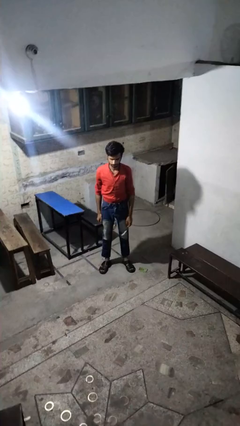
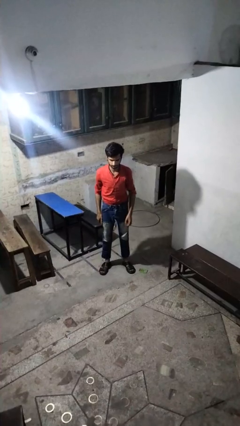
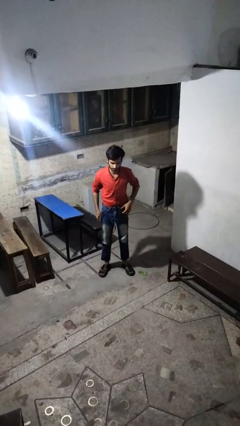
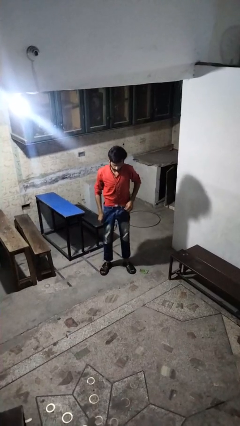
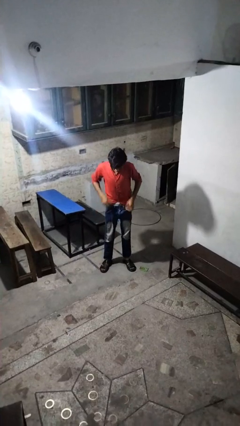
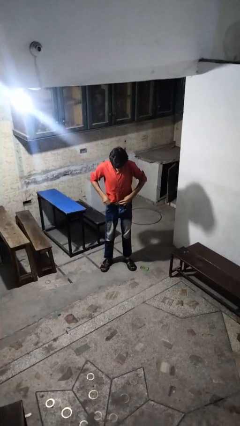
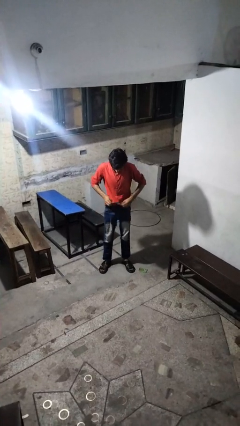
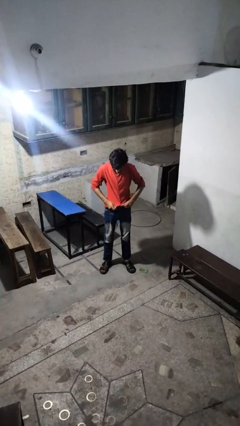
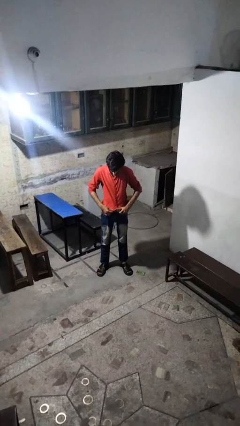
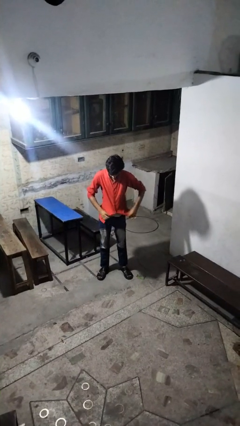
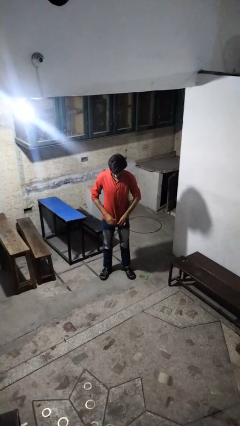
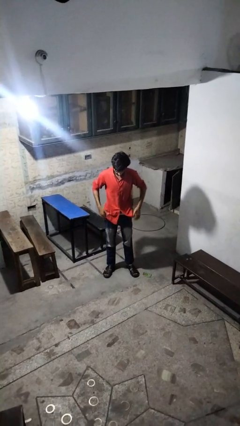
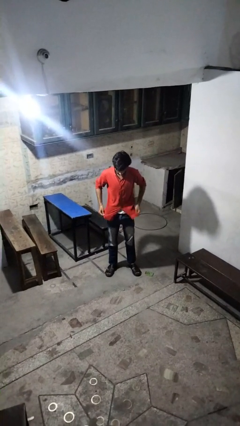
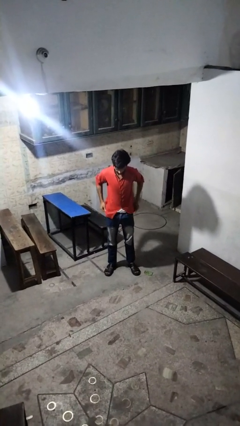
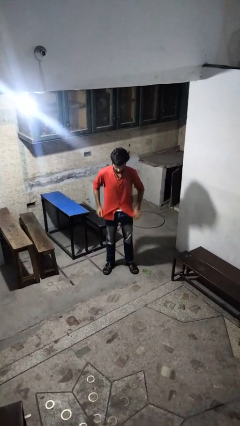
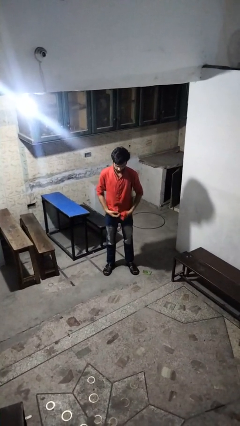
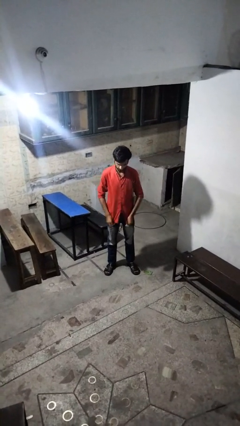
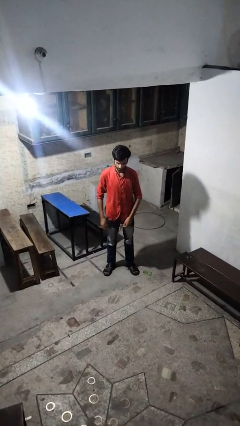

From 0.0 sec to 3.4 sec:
person untucks shirt

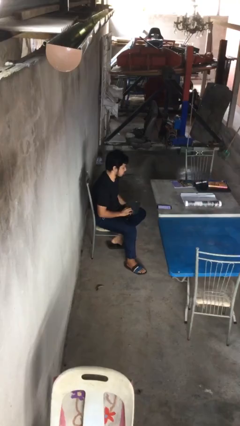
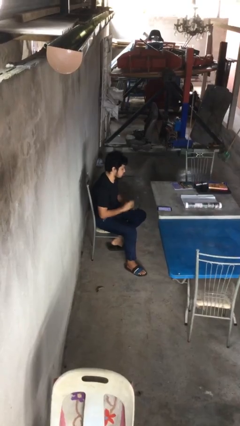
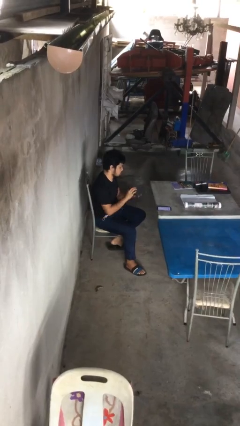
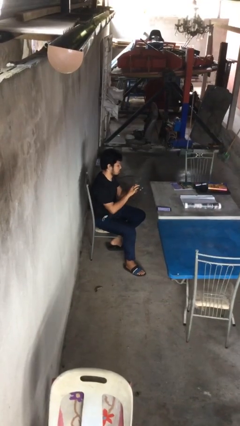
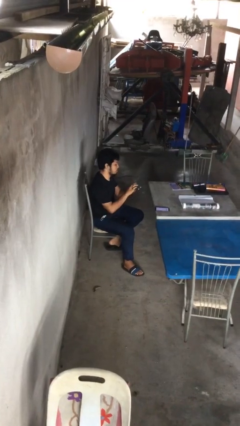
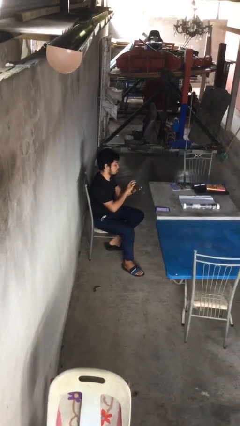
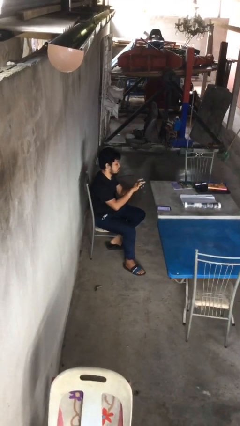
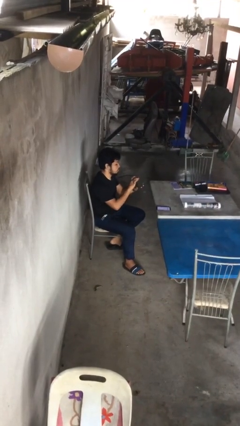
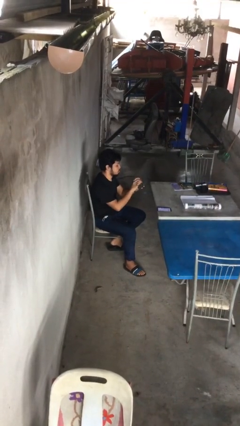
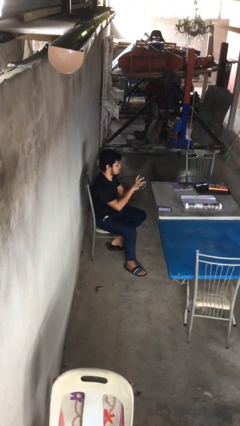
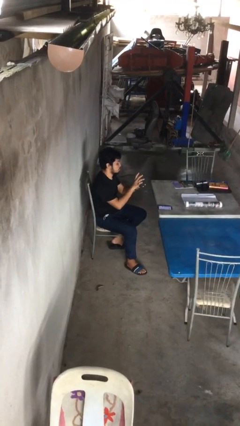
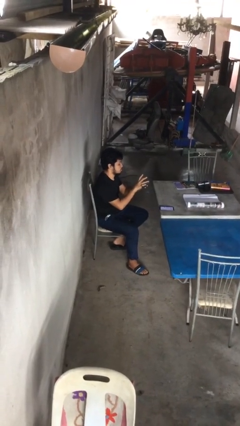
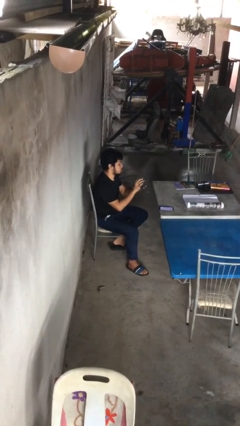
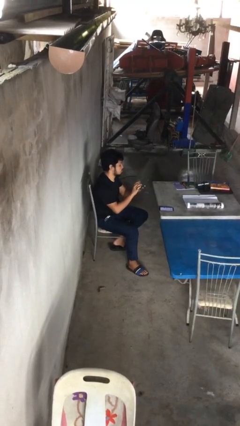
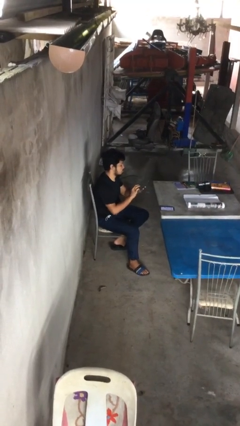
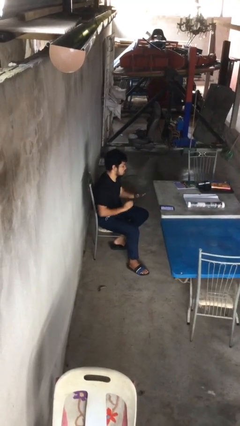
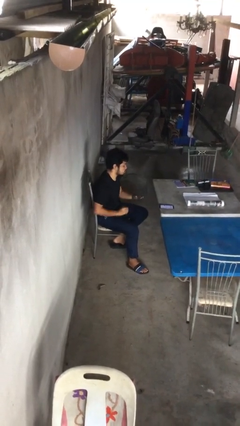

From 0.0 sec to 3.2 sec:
person interacts with tablet

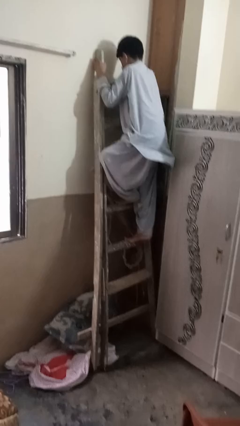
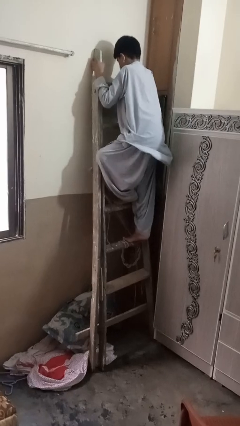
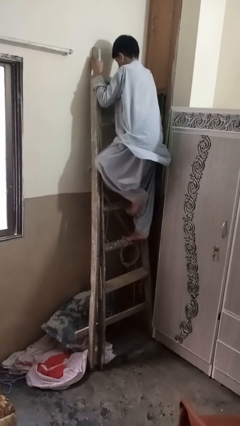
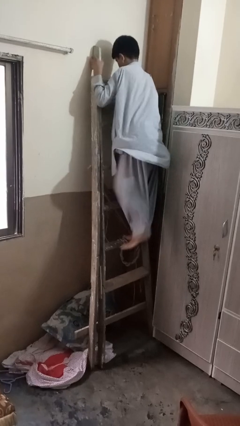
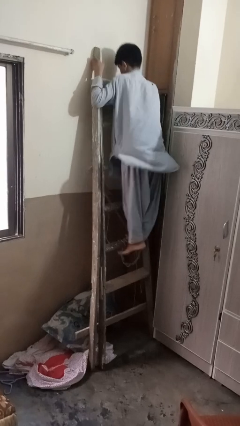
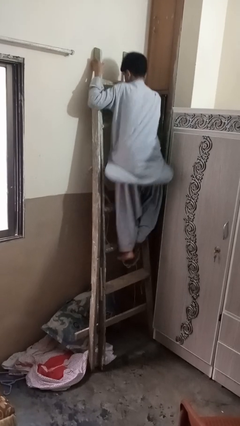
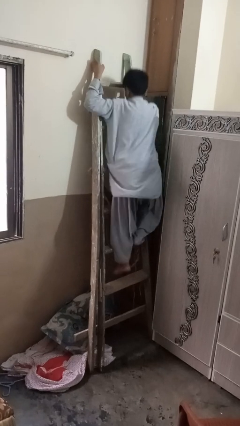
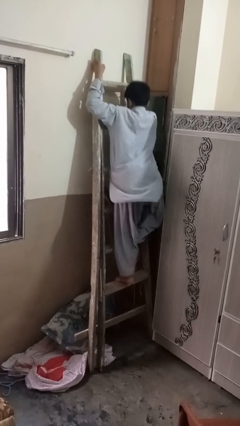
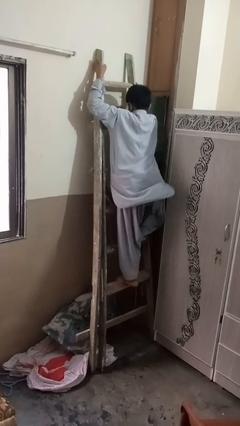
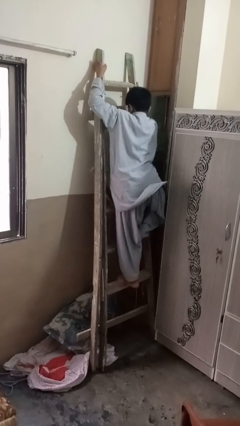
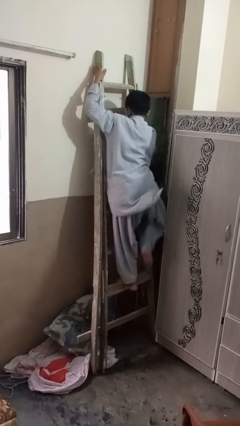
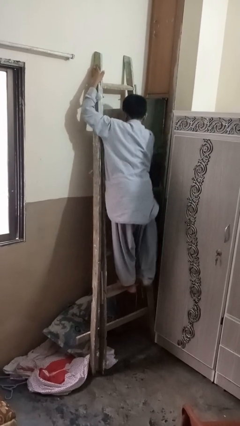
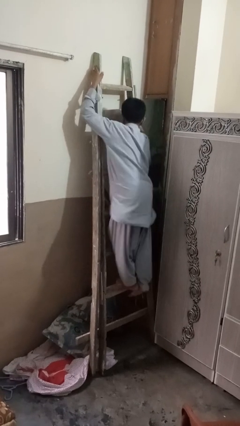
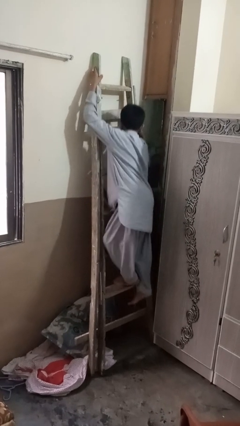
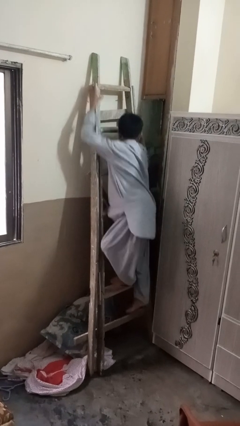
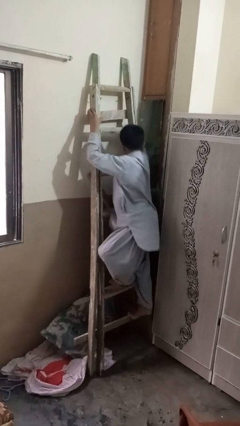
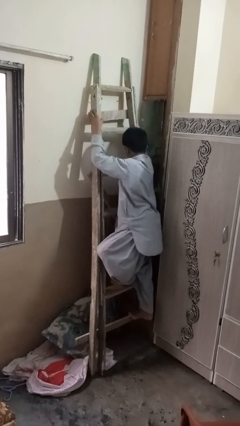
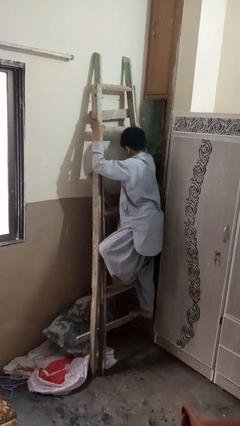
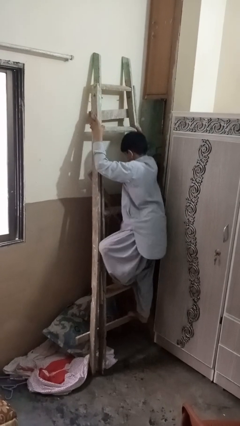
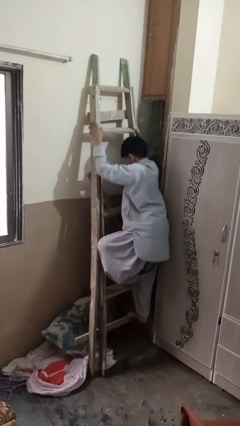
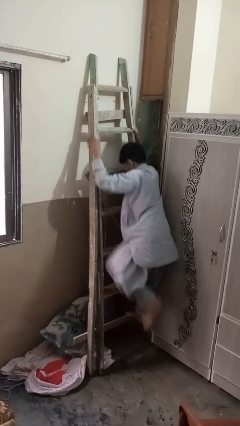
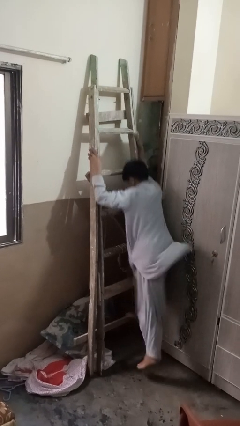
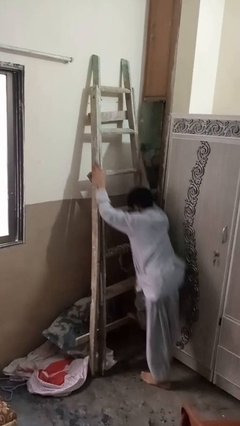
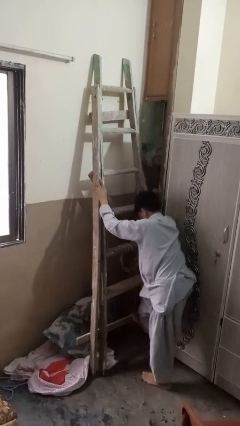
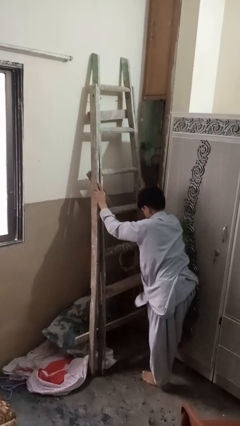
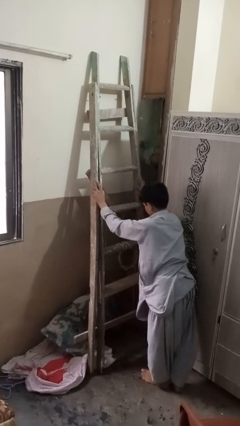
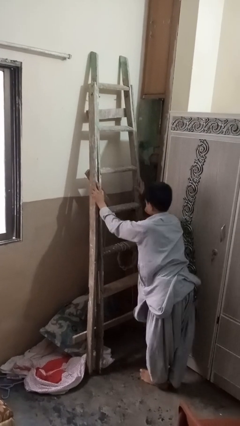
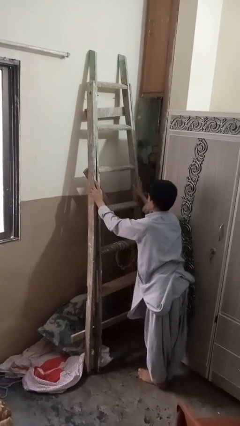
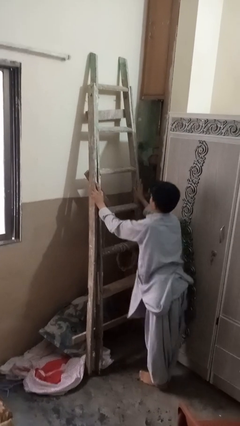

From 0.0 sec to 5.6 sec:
person climbs down ladder

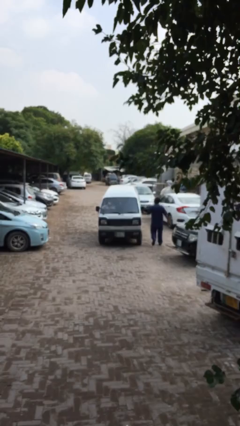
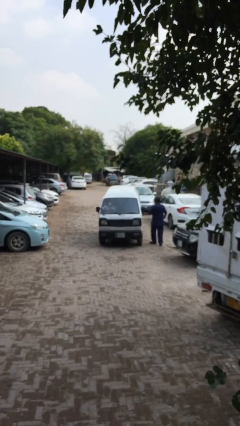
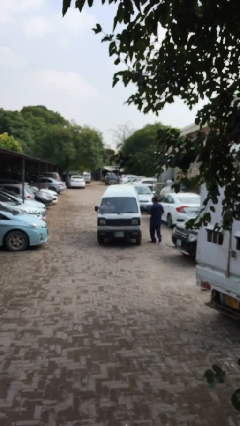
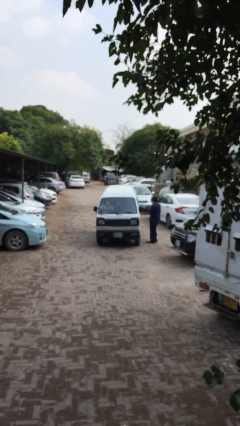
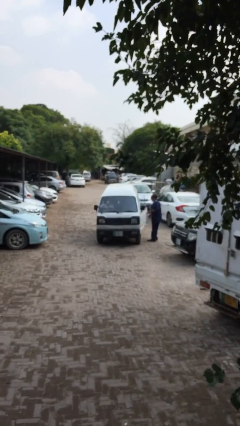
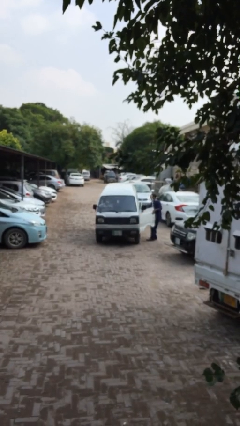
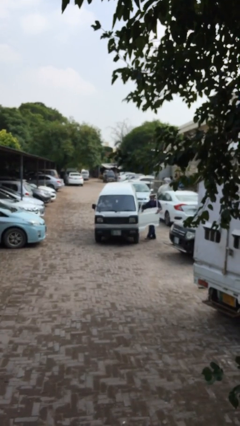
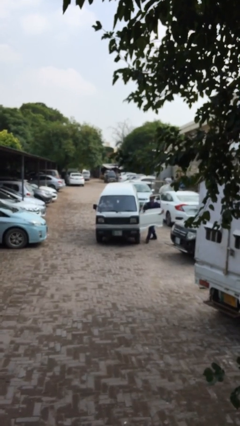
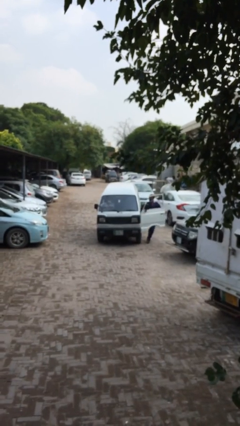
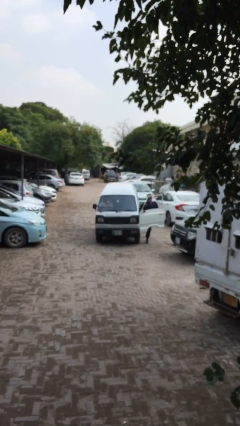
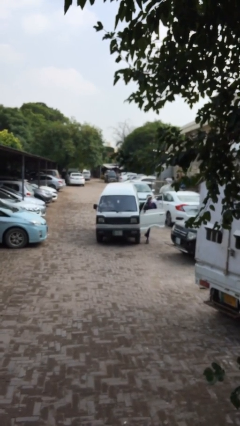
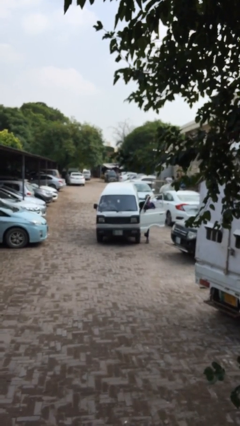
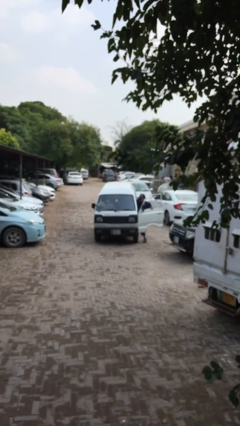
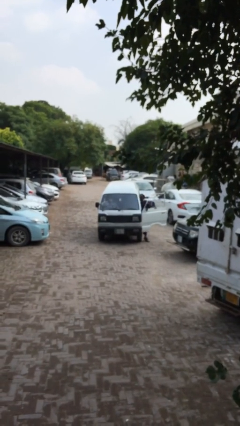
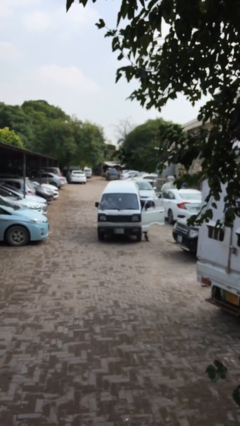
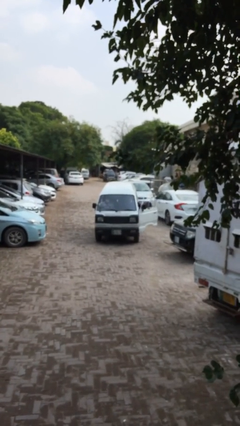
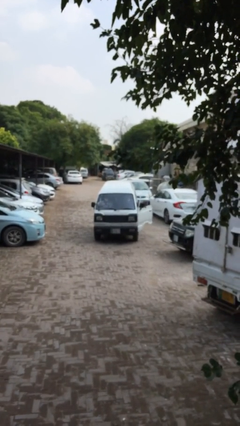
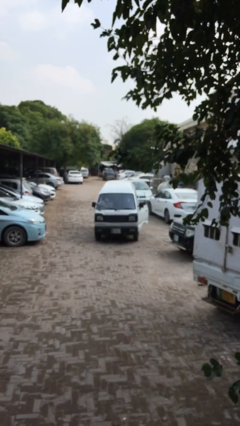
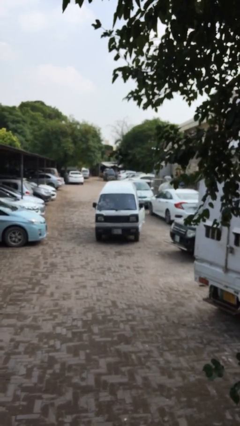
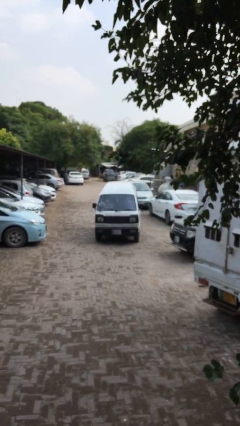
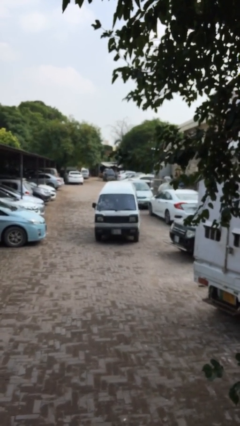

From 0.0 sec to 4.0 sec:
car picks up person

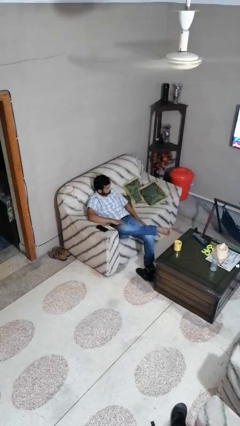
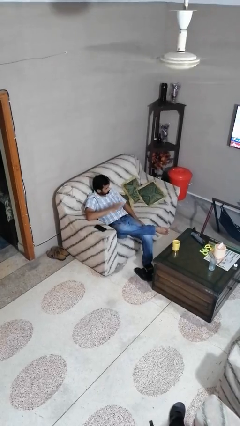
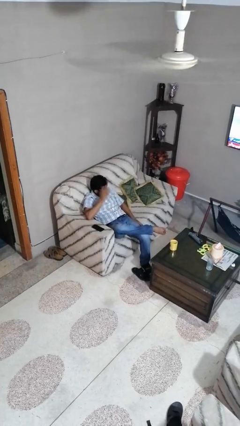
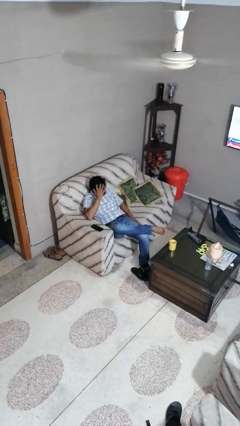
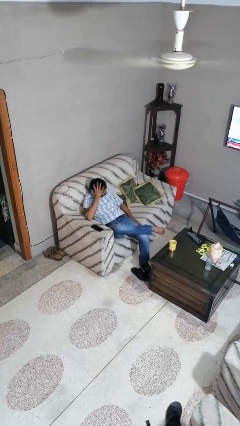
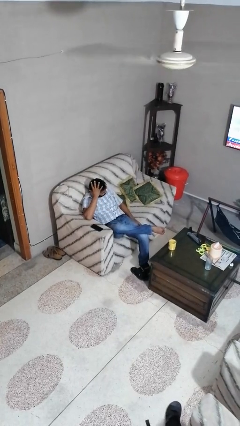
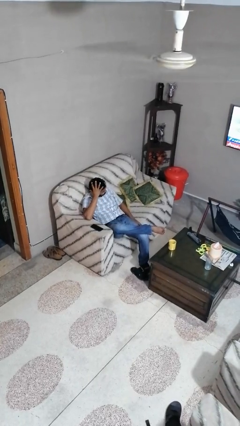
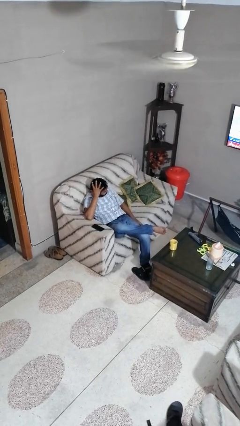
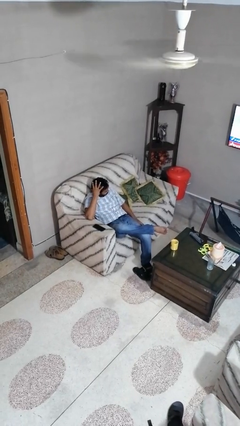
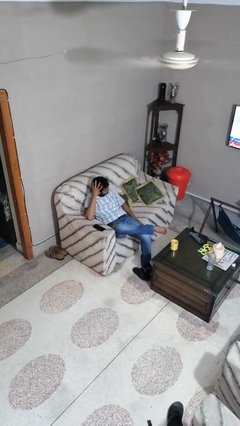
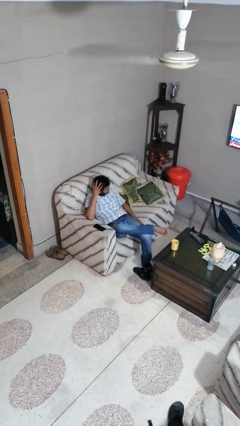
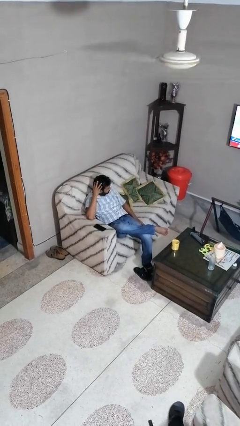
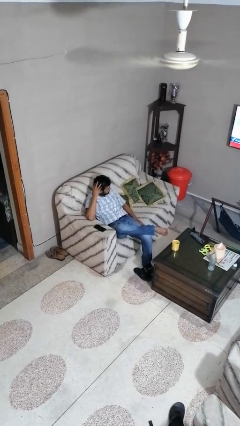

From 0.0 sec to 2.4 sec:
person strokes hair
